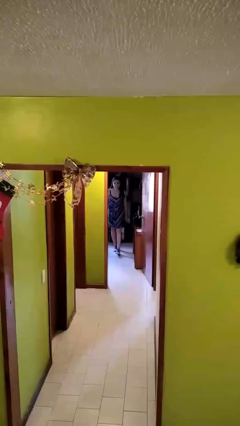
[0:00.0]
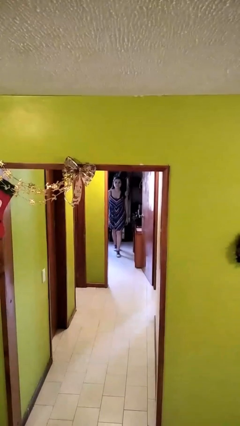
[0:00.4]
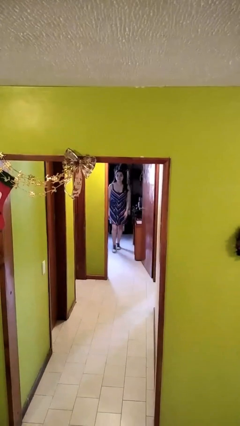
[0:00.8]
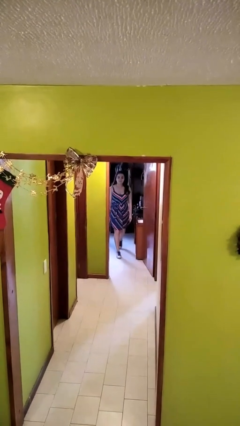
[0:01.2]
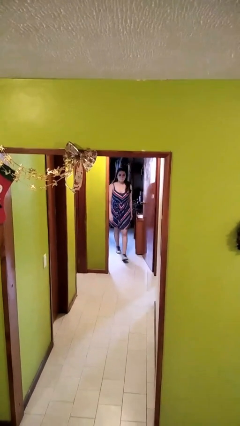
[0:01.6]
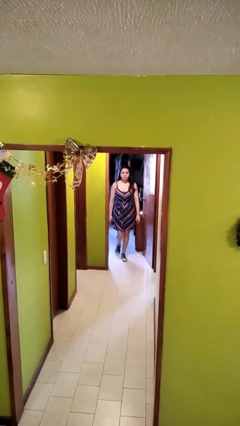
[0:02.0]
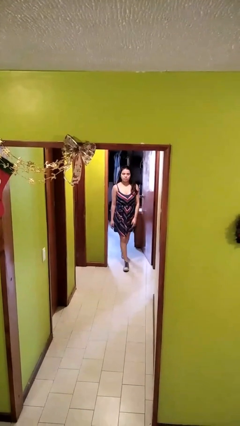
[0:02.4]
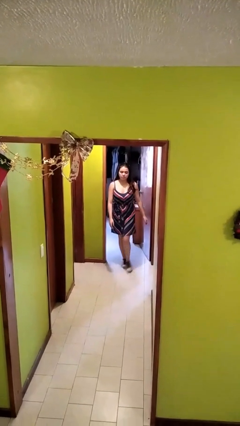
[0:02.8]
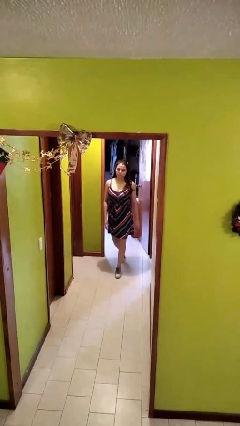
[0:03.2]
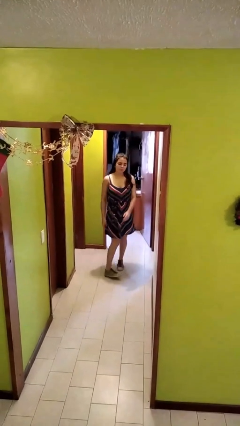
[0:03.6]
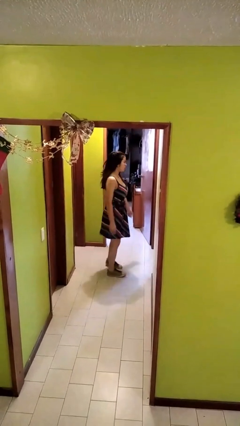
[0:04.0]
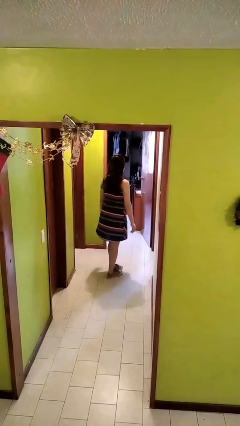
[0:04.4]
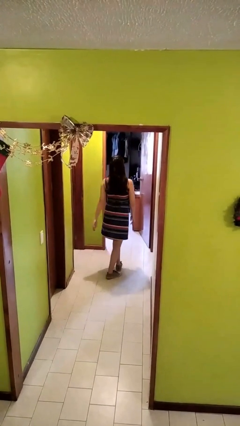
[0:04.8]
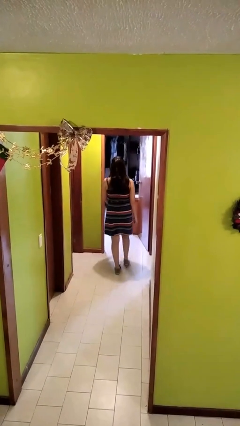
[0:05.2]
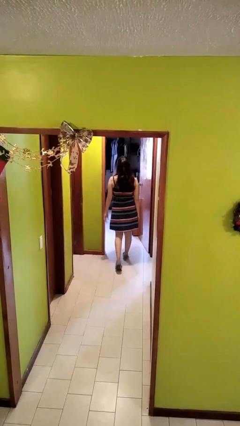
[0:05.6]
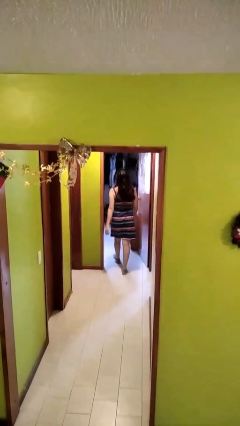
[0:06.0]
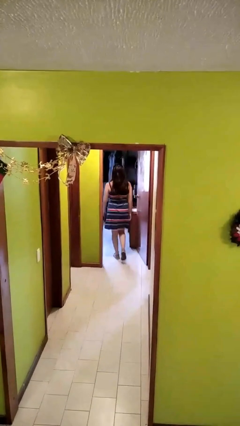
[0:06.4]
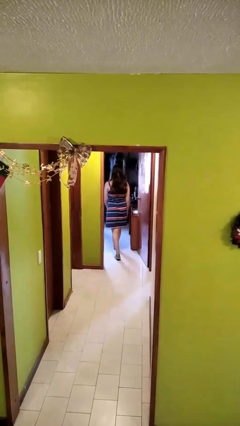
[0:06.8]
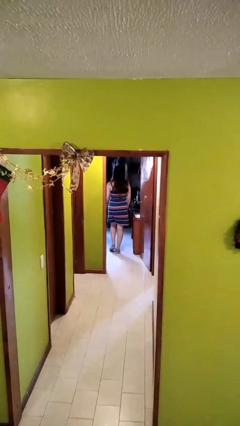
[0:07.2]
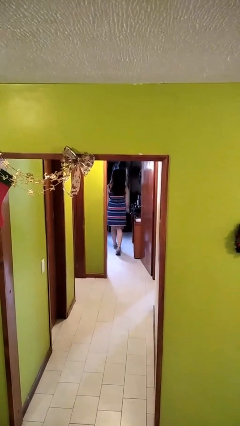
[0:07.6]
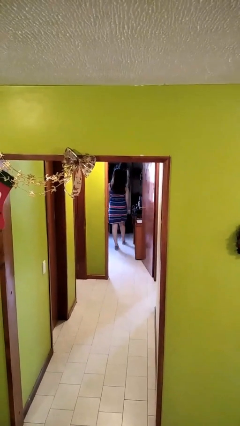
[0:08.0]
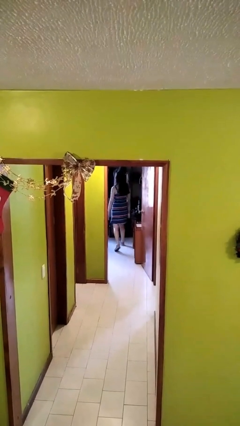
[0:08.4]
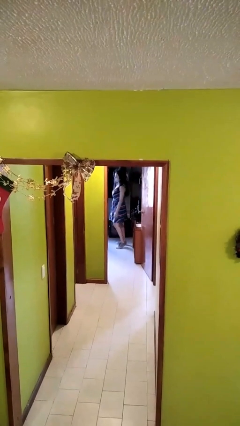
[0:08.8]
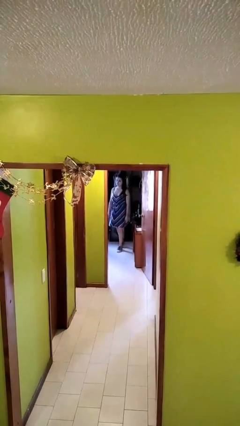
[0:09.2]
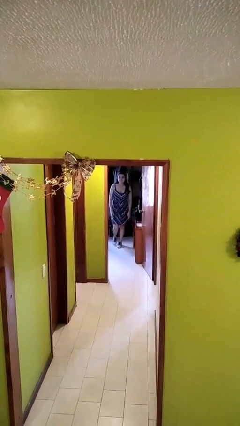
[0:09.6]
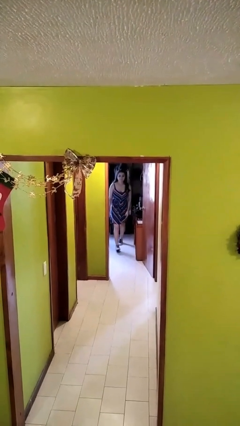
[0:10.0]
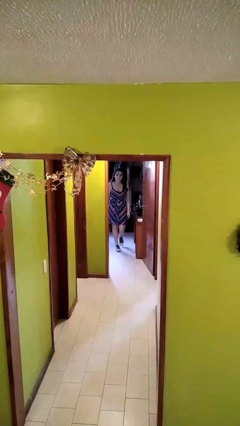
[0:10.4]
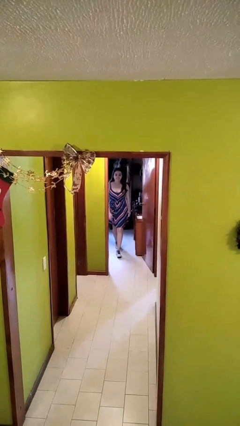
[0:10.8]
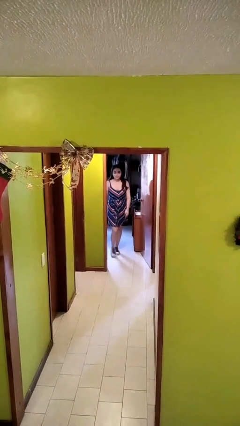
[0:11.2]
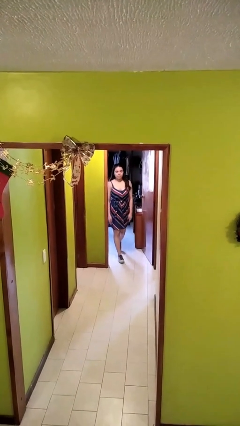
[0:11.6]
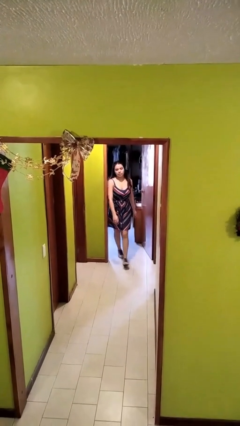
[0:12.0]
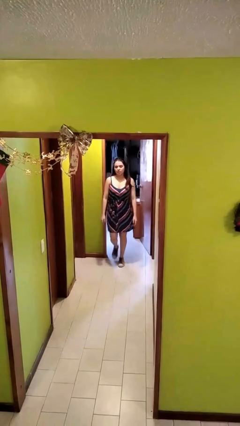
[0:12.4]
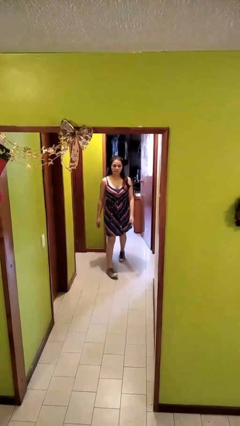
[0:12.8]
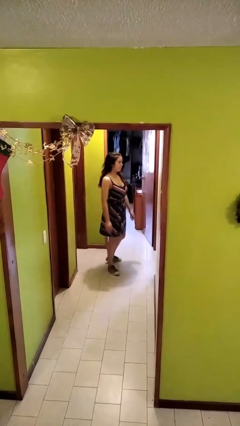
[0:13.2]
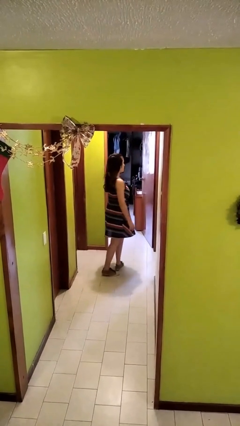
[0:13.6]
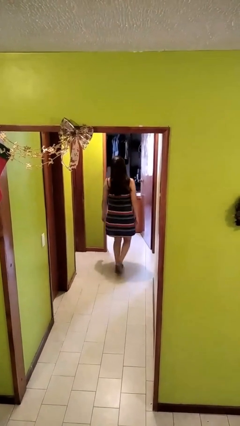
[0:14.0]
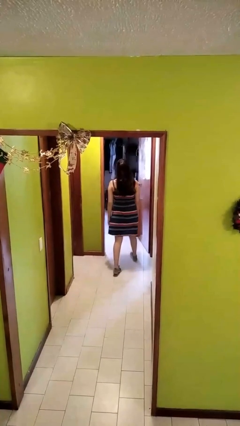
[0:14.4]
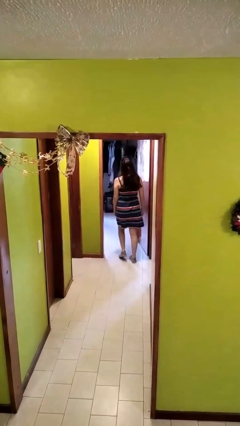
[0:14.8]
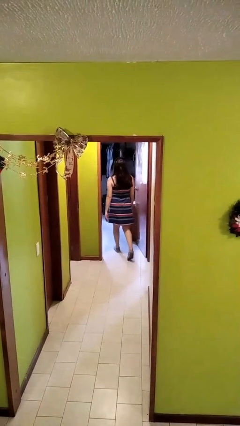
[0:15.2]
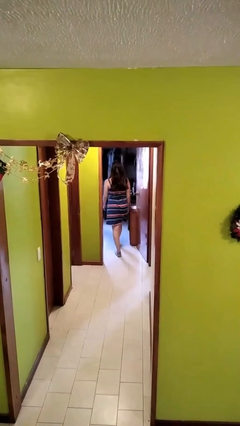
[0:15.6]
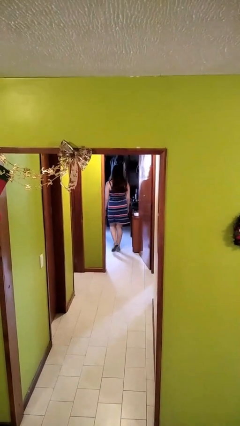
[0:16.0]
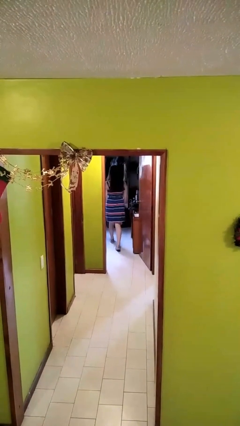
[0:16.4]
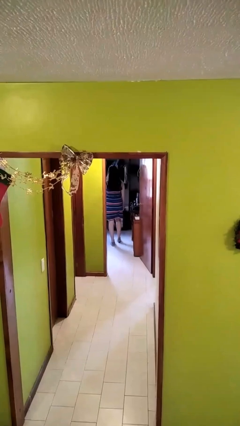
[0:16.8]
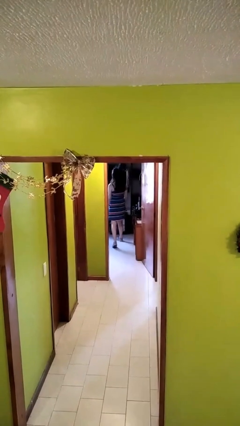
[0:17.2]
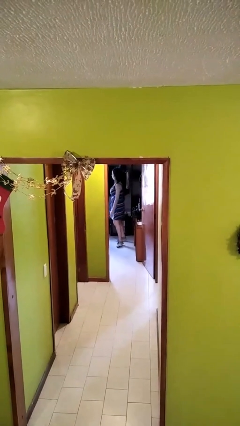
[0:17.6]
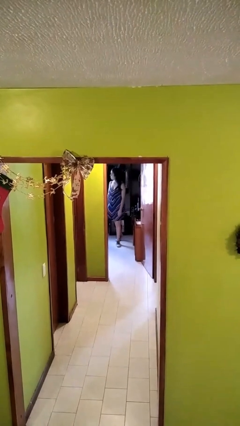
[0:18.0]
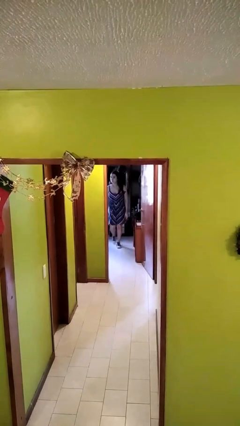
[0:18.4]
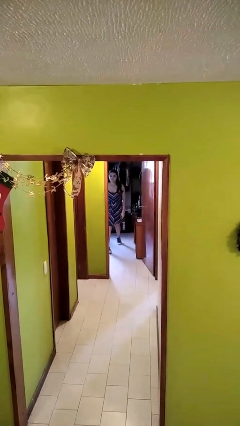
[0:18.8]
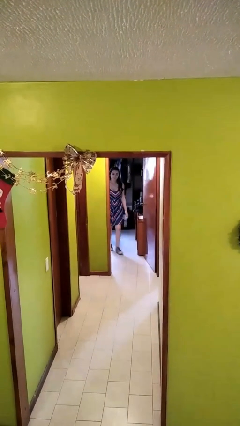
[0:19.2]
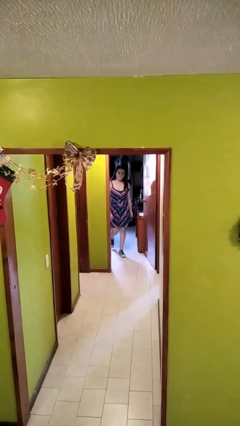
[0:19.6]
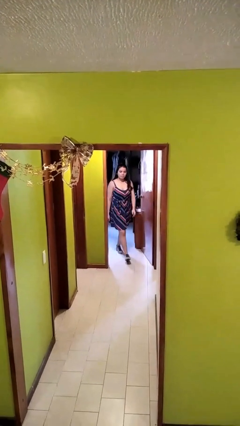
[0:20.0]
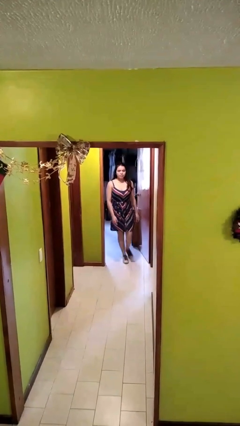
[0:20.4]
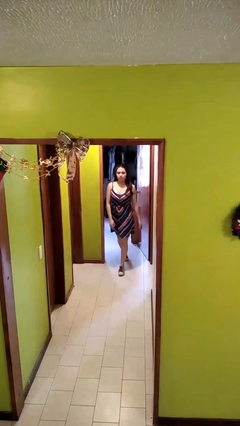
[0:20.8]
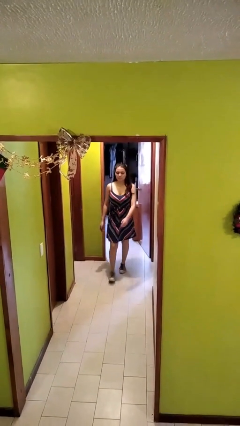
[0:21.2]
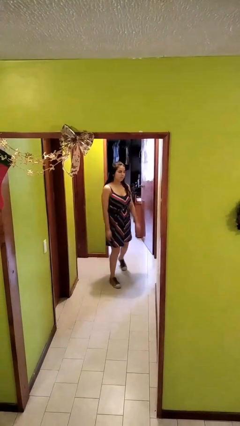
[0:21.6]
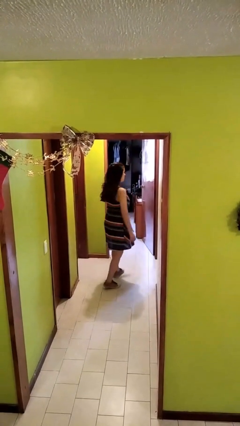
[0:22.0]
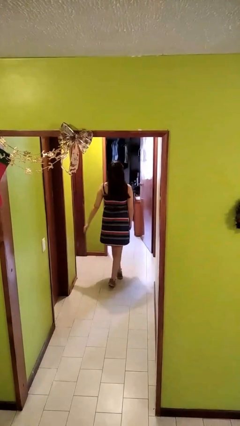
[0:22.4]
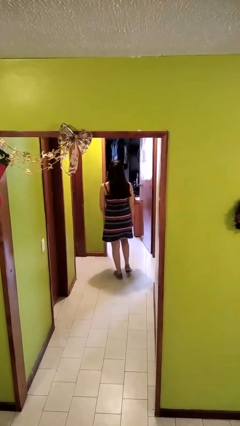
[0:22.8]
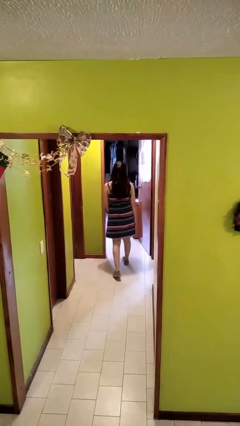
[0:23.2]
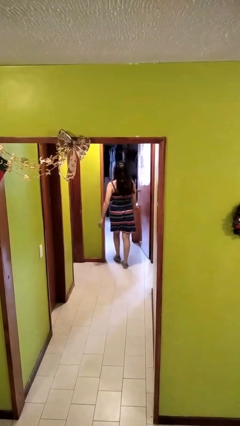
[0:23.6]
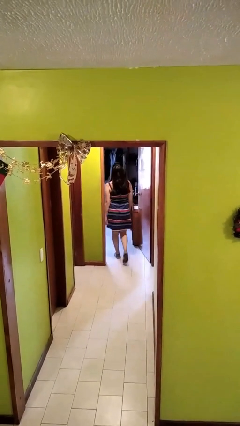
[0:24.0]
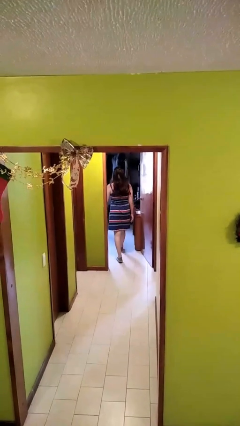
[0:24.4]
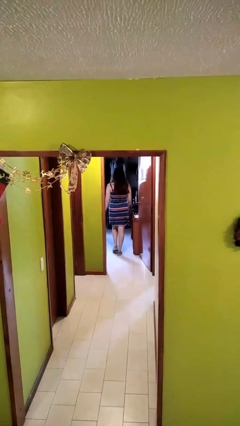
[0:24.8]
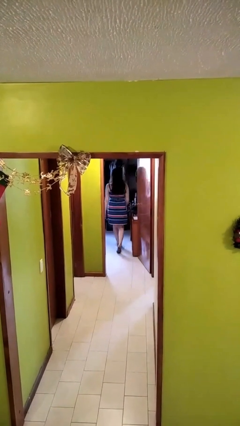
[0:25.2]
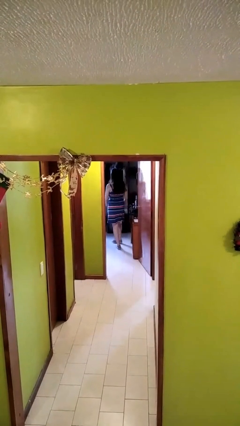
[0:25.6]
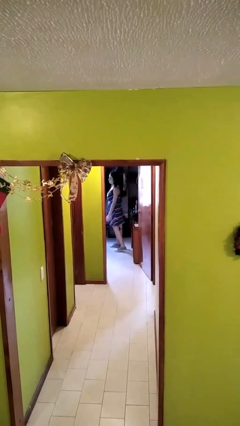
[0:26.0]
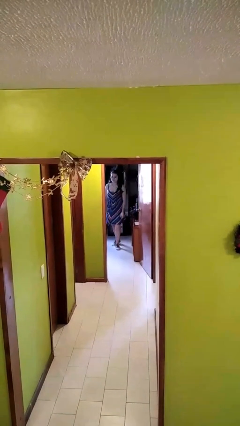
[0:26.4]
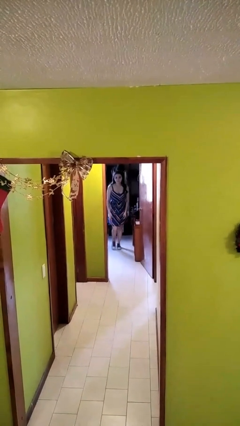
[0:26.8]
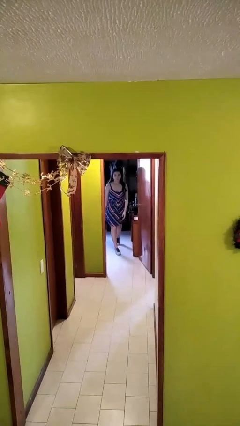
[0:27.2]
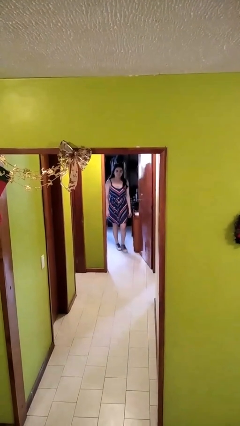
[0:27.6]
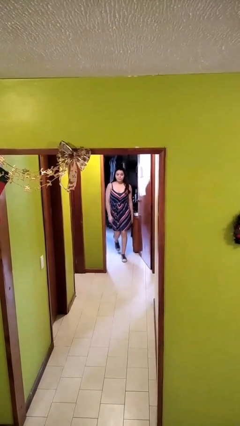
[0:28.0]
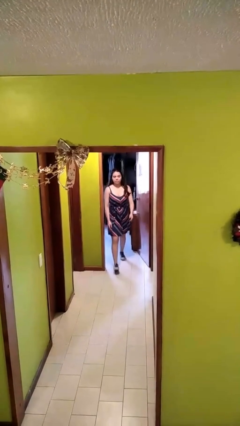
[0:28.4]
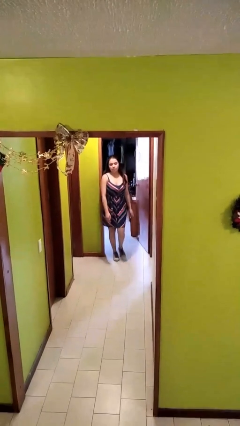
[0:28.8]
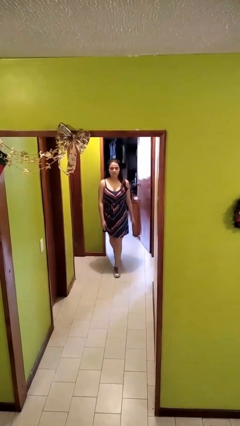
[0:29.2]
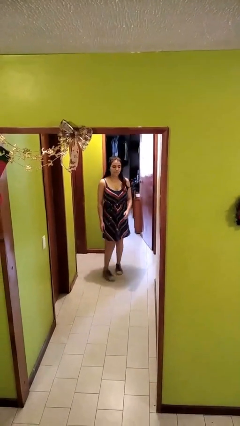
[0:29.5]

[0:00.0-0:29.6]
person walks

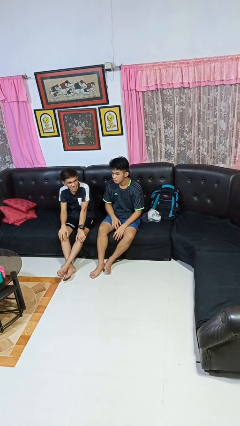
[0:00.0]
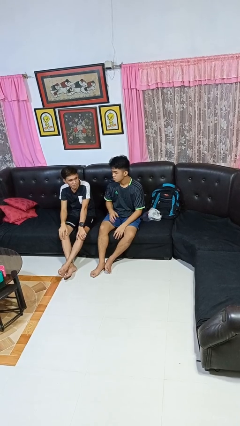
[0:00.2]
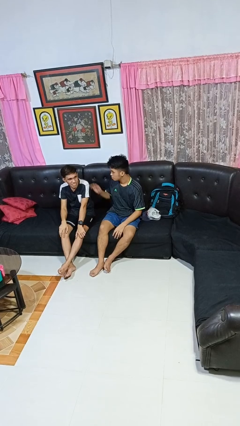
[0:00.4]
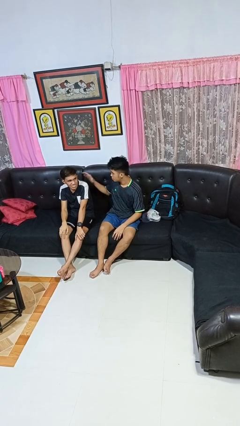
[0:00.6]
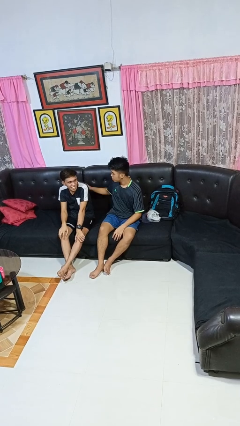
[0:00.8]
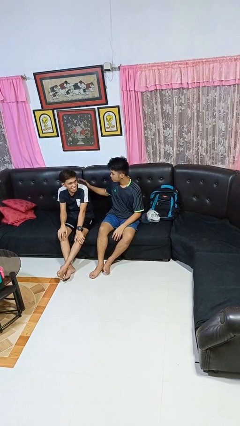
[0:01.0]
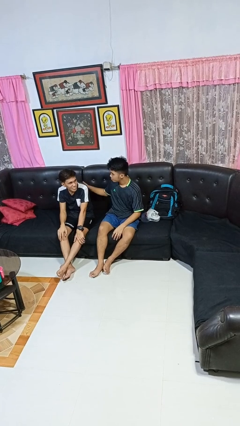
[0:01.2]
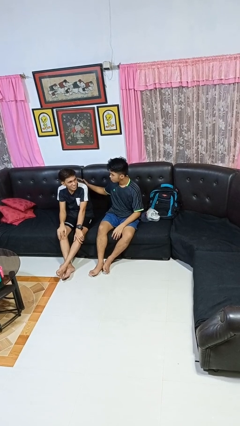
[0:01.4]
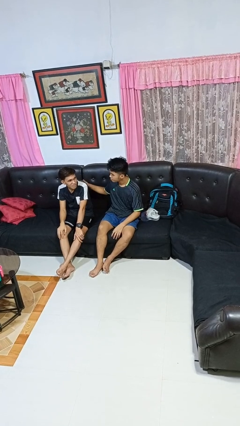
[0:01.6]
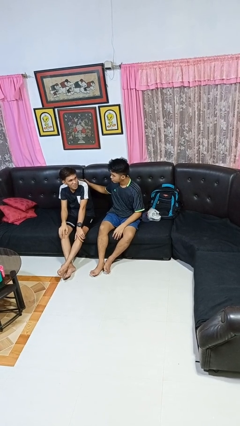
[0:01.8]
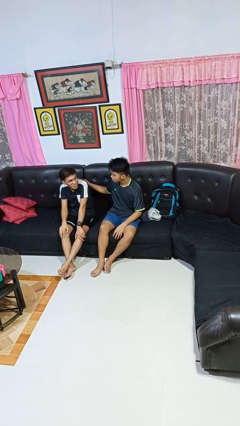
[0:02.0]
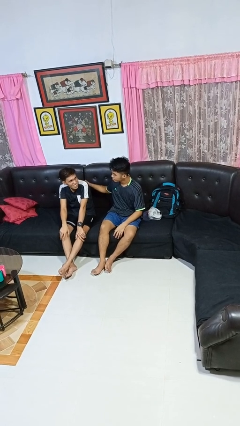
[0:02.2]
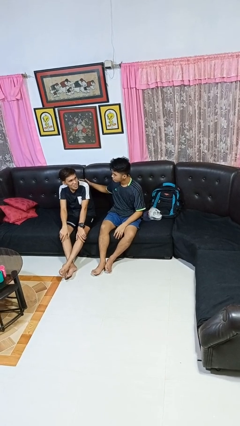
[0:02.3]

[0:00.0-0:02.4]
person touches back of person

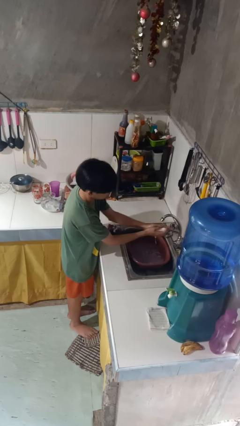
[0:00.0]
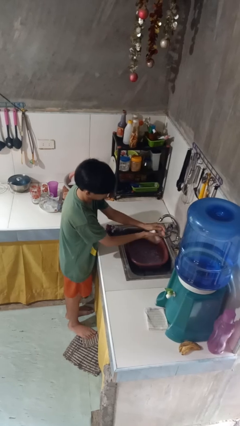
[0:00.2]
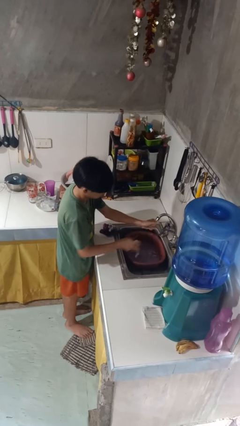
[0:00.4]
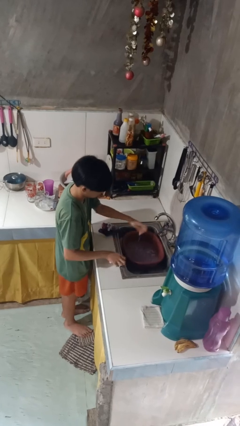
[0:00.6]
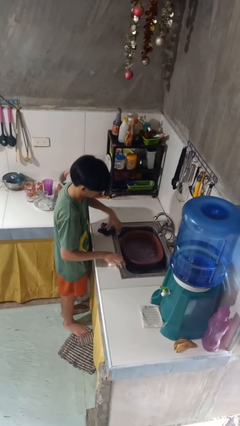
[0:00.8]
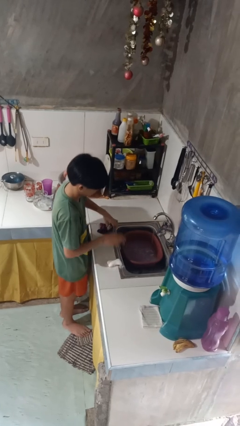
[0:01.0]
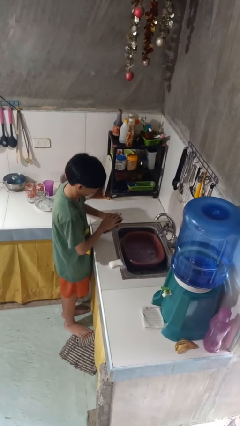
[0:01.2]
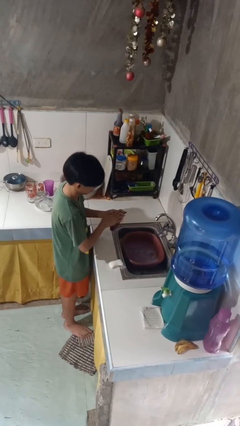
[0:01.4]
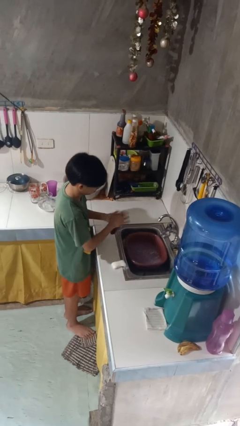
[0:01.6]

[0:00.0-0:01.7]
person dries hands with towel
